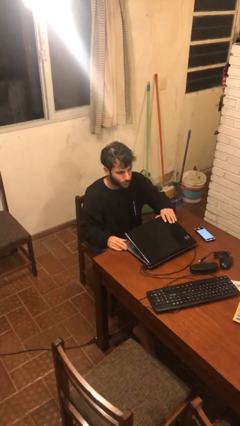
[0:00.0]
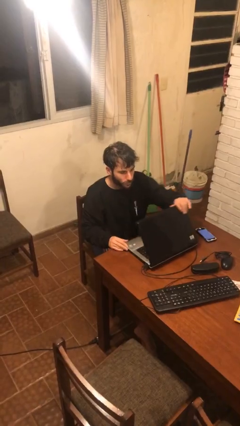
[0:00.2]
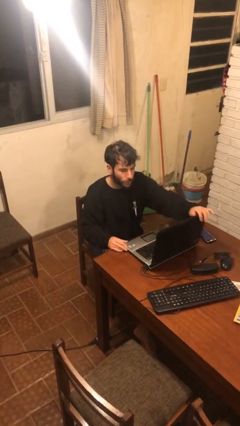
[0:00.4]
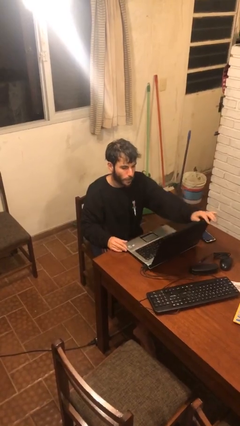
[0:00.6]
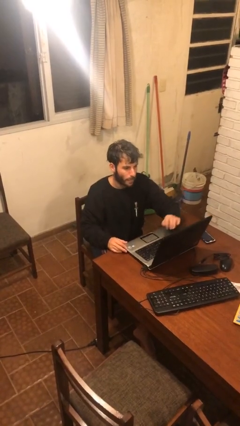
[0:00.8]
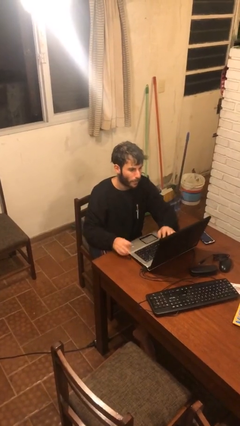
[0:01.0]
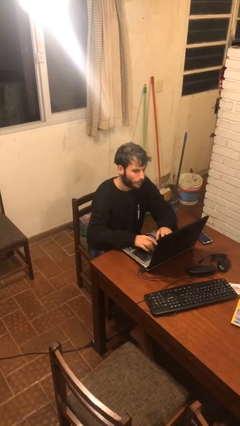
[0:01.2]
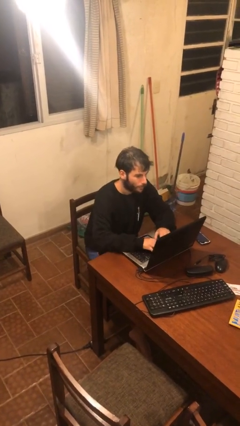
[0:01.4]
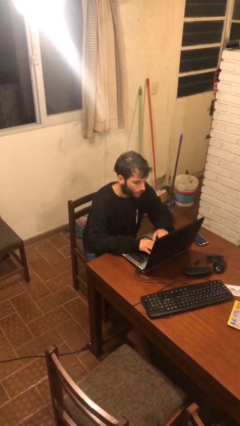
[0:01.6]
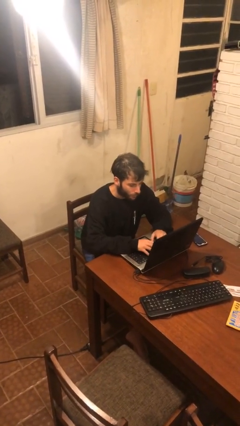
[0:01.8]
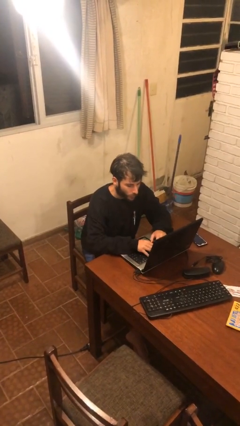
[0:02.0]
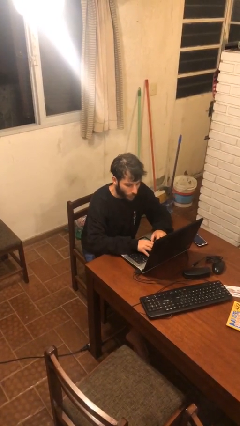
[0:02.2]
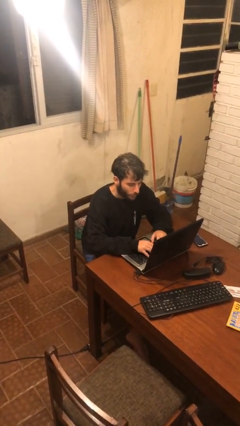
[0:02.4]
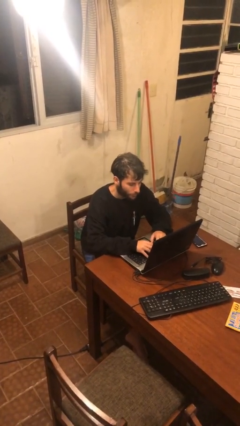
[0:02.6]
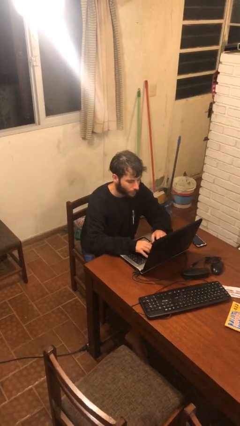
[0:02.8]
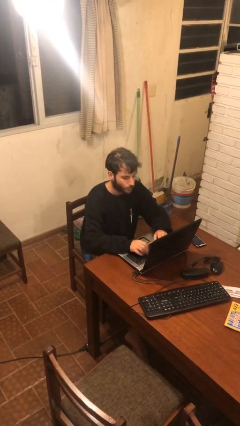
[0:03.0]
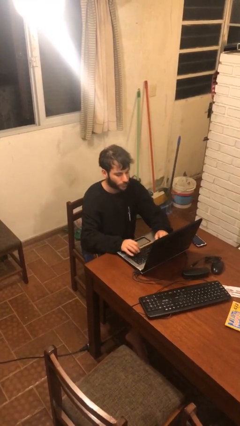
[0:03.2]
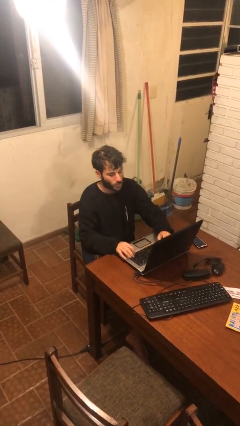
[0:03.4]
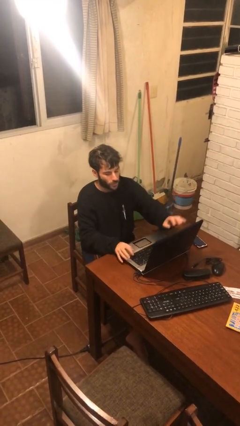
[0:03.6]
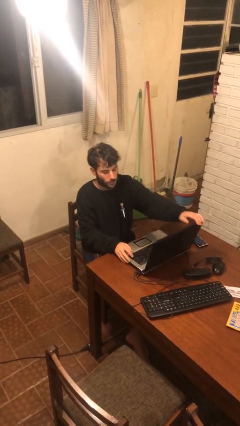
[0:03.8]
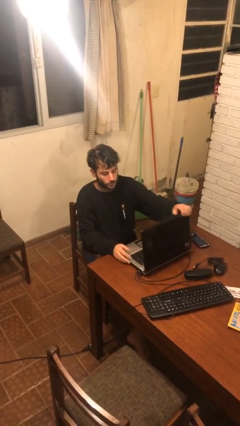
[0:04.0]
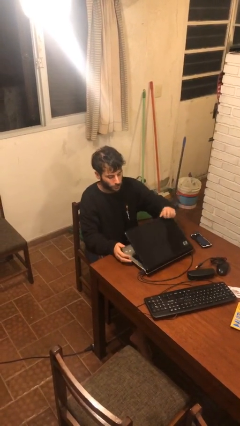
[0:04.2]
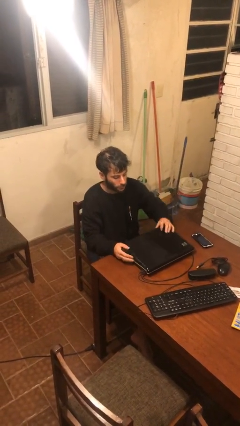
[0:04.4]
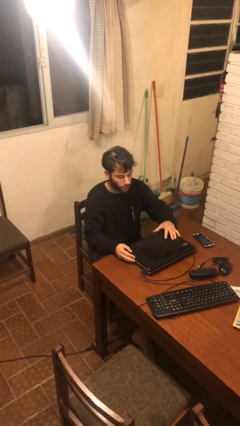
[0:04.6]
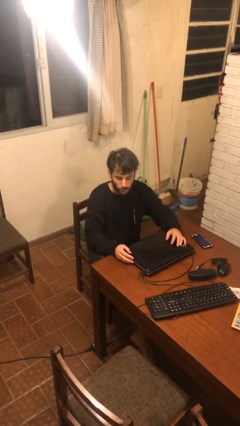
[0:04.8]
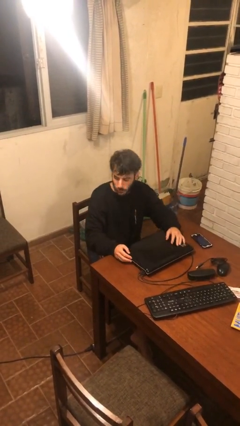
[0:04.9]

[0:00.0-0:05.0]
person interacts with laptop

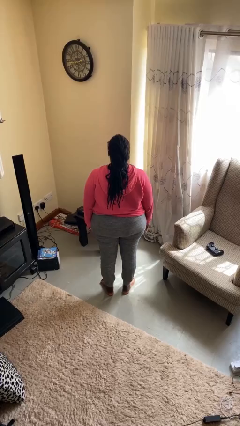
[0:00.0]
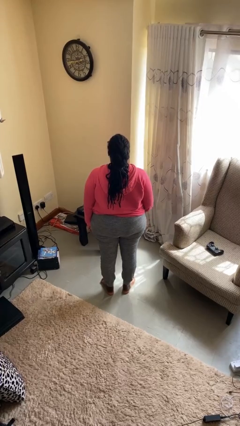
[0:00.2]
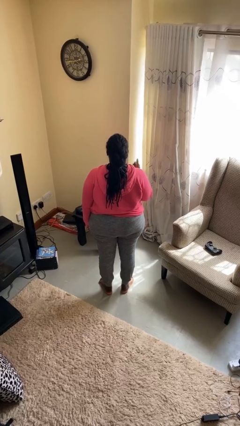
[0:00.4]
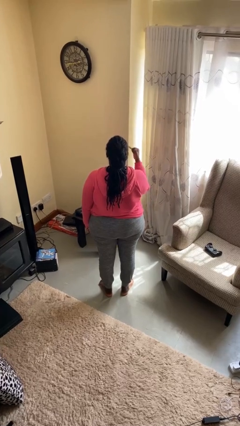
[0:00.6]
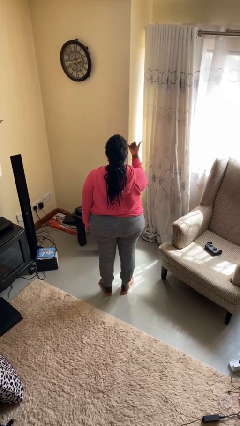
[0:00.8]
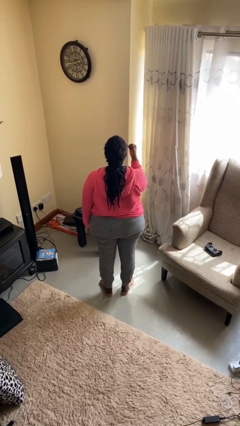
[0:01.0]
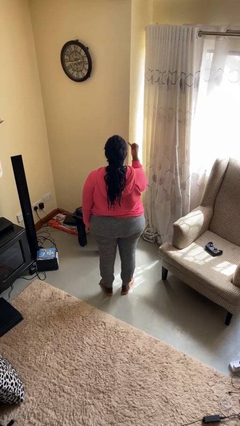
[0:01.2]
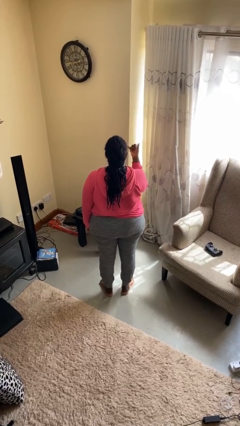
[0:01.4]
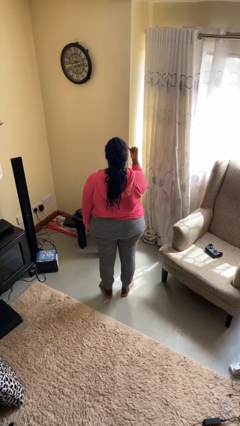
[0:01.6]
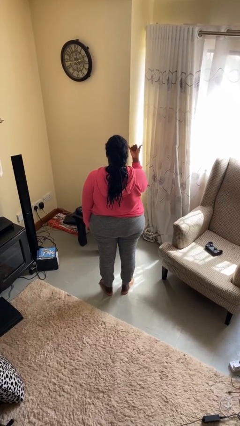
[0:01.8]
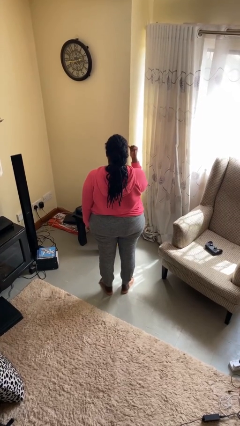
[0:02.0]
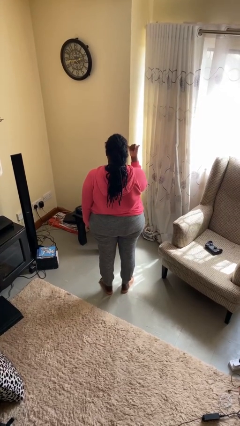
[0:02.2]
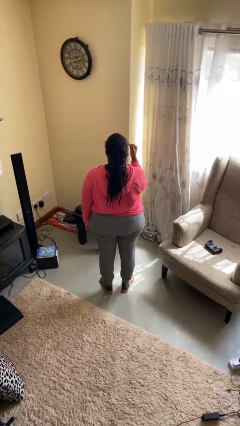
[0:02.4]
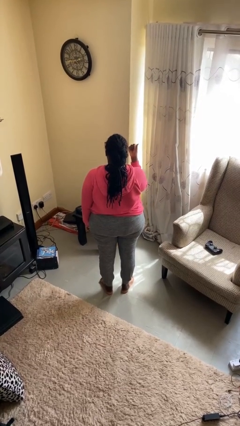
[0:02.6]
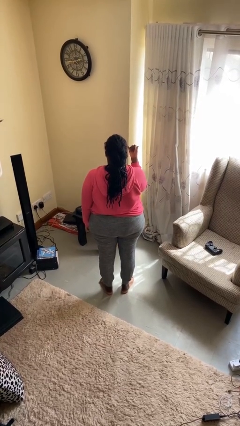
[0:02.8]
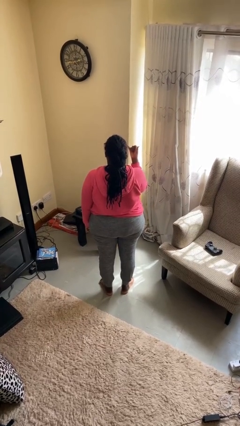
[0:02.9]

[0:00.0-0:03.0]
person gestures hang loose

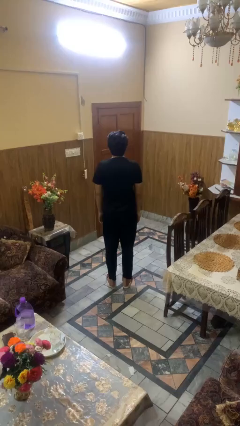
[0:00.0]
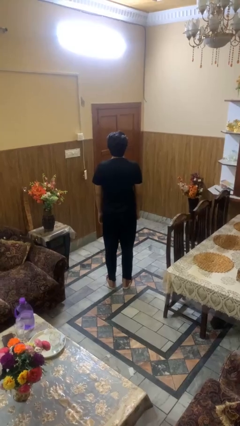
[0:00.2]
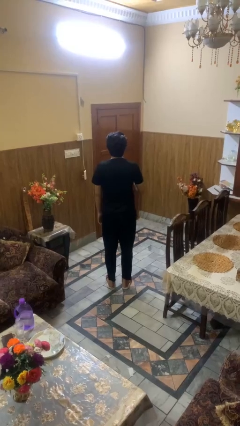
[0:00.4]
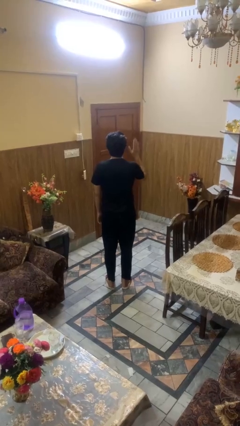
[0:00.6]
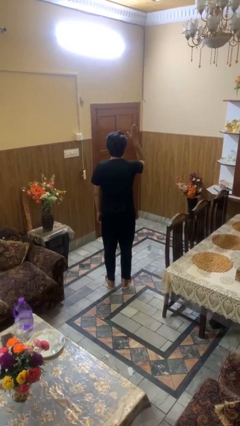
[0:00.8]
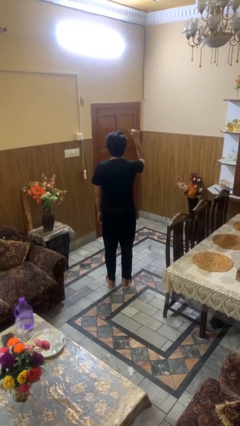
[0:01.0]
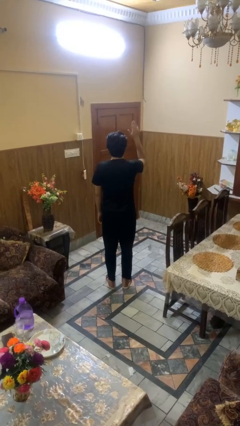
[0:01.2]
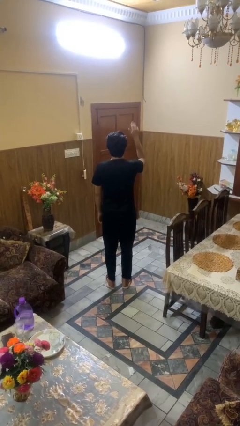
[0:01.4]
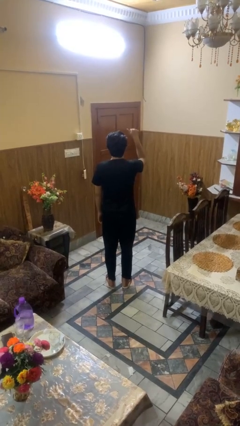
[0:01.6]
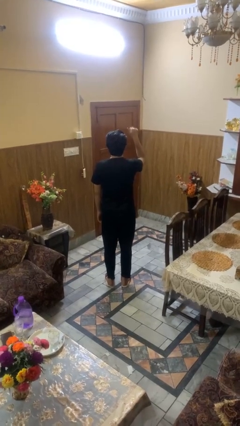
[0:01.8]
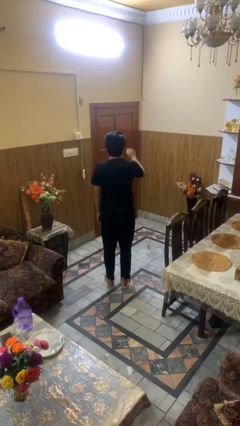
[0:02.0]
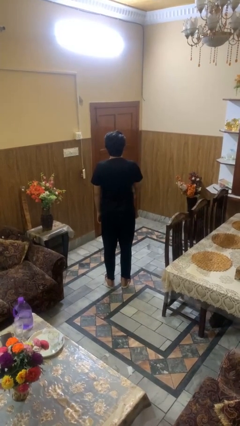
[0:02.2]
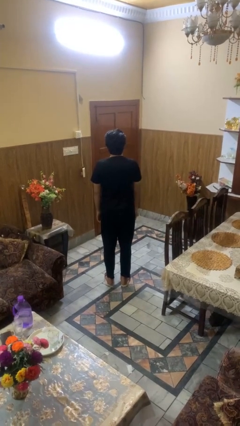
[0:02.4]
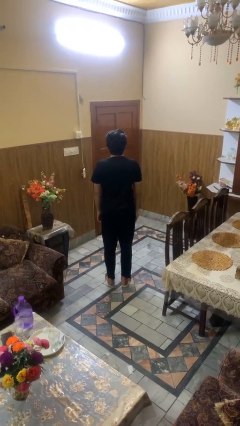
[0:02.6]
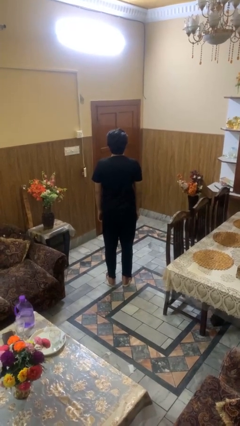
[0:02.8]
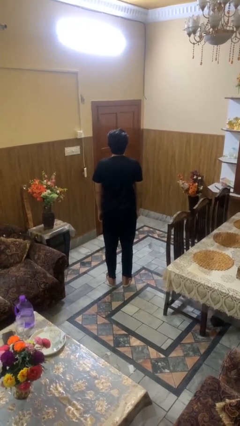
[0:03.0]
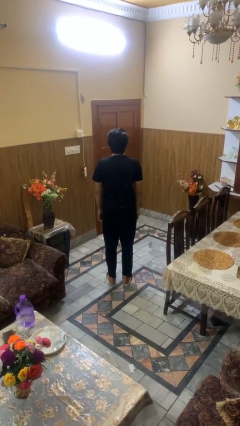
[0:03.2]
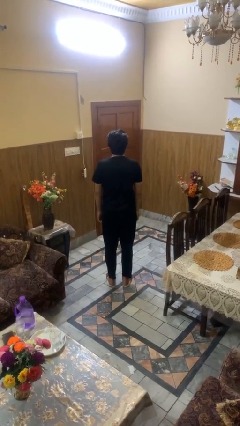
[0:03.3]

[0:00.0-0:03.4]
person gestures come here

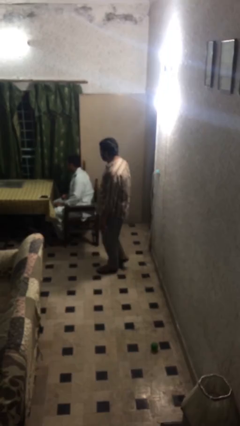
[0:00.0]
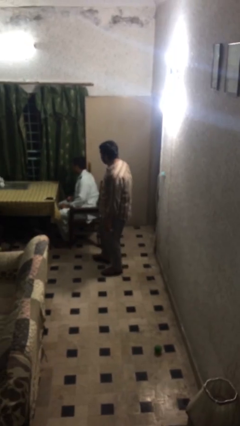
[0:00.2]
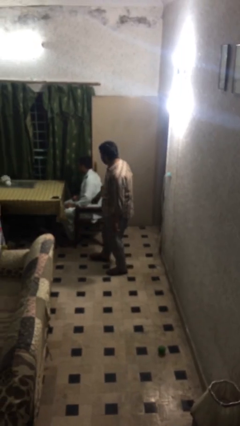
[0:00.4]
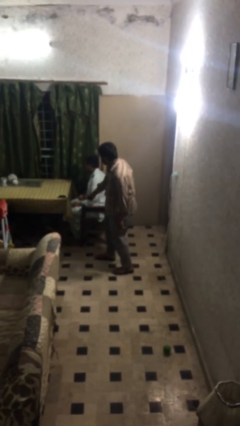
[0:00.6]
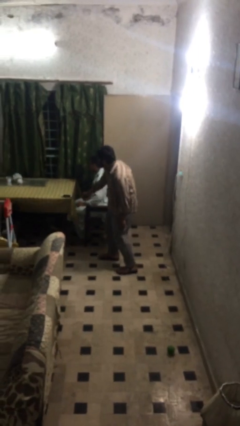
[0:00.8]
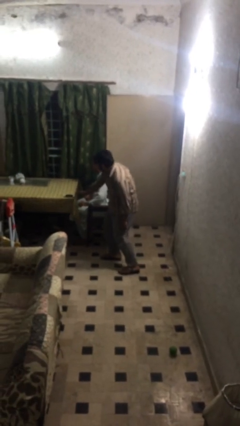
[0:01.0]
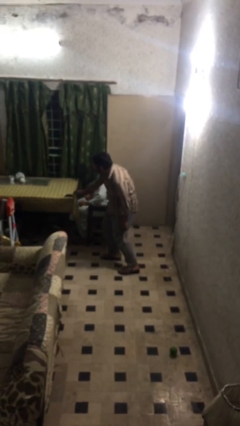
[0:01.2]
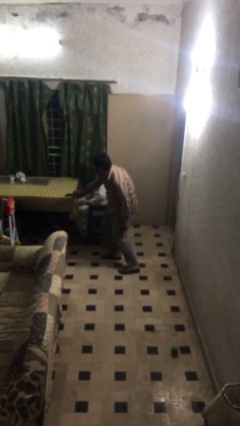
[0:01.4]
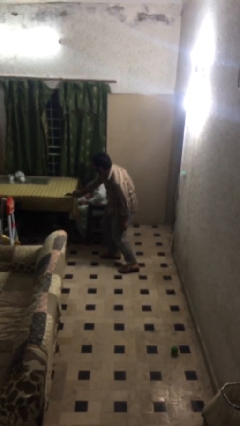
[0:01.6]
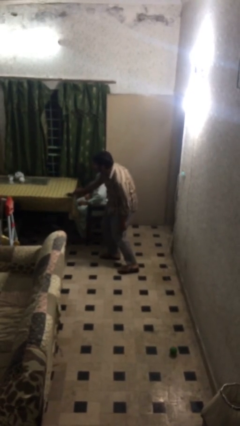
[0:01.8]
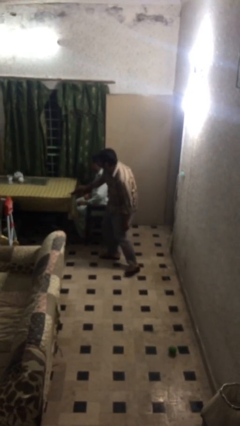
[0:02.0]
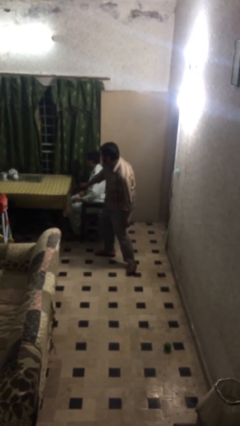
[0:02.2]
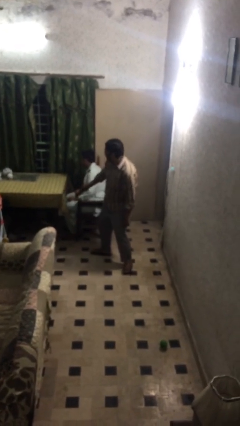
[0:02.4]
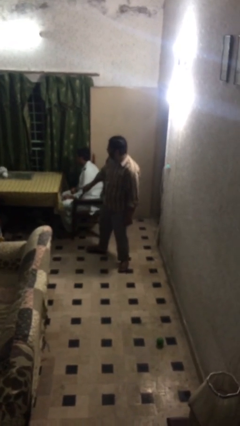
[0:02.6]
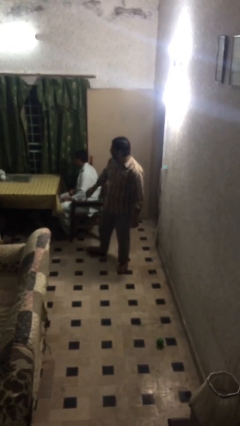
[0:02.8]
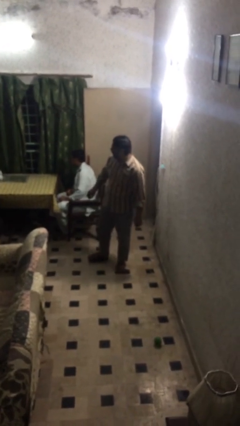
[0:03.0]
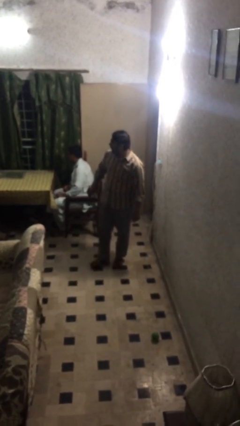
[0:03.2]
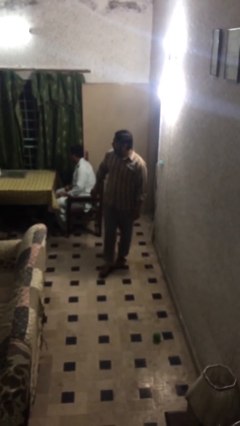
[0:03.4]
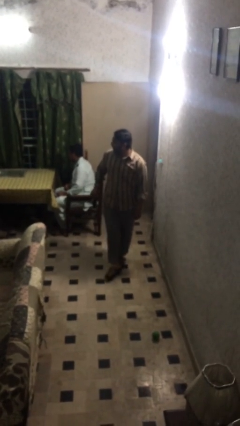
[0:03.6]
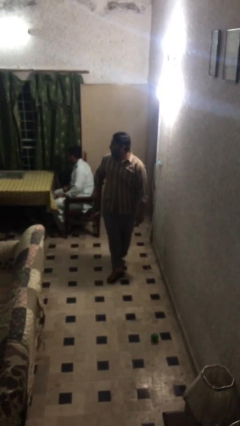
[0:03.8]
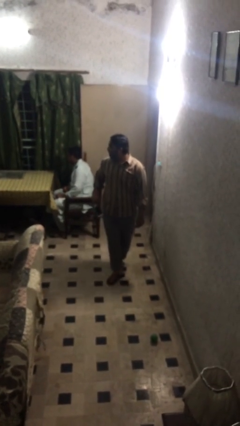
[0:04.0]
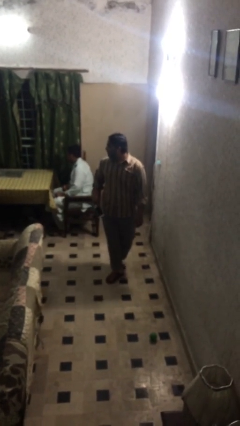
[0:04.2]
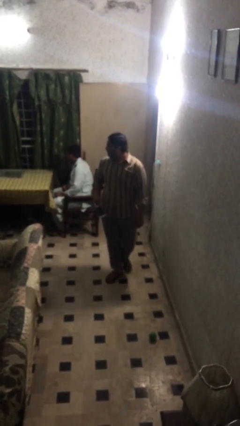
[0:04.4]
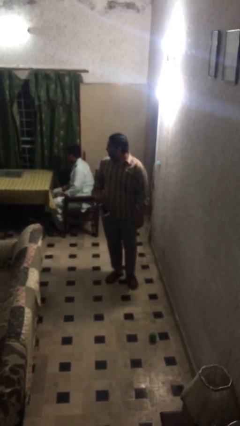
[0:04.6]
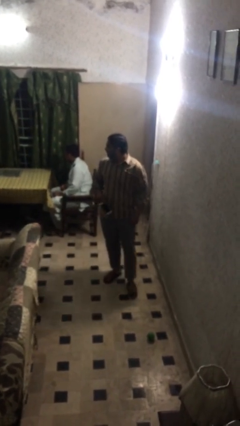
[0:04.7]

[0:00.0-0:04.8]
person steals object from person

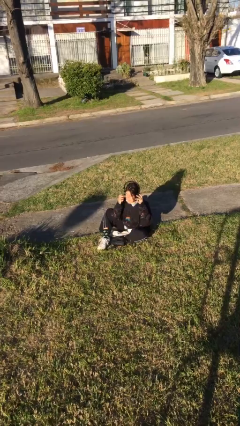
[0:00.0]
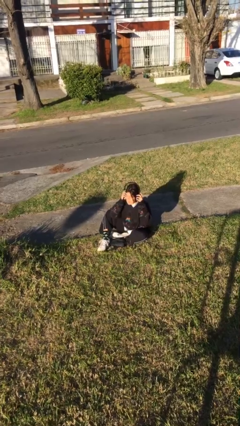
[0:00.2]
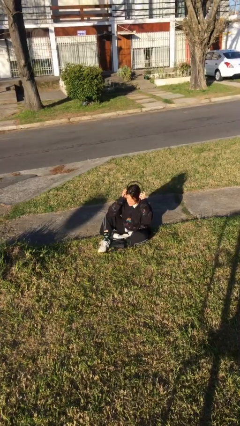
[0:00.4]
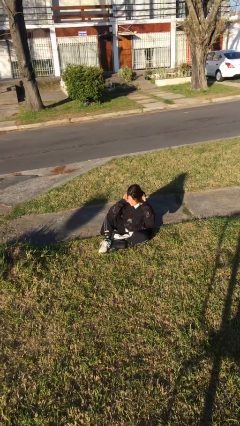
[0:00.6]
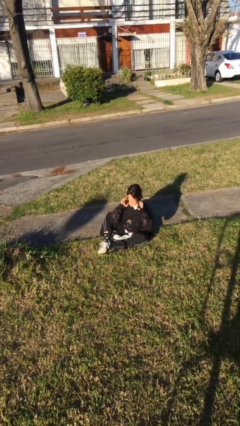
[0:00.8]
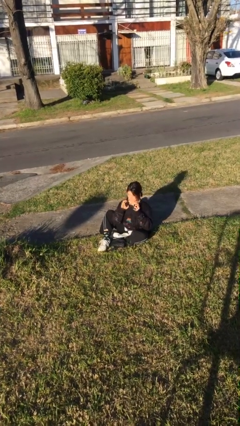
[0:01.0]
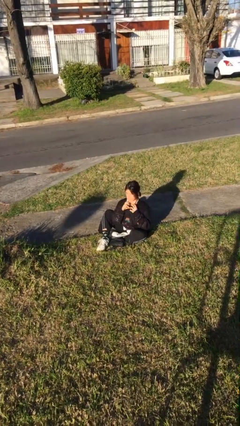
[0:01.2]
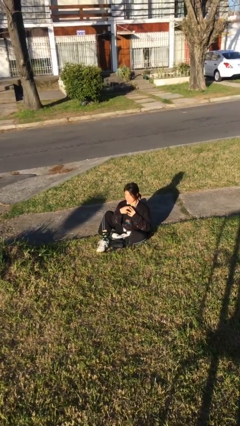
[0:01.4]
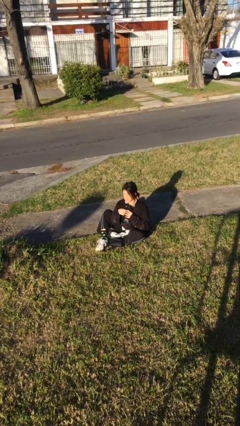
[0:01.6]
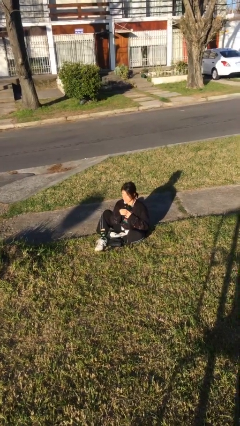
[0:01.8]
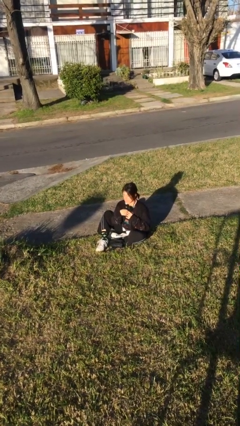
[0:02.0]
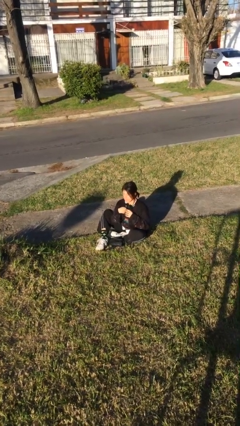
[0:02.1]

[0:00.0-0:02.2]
person takes off headphones
